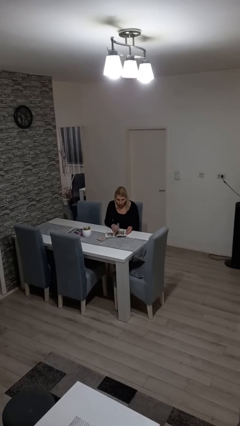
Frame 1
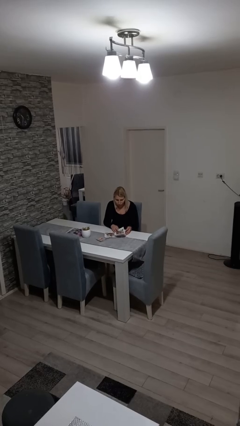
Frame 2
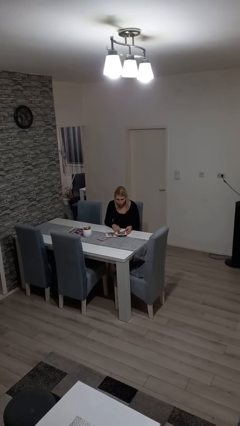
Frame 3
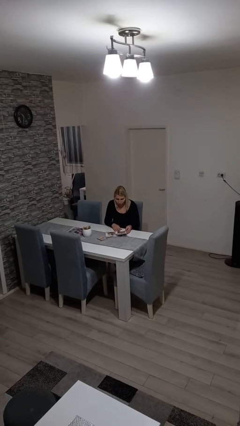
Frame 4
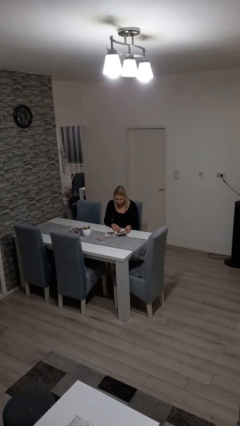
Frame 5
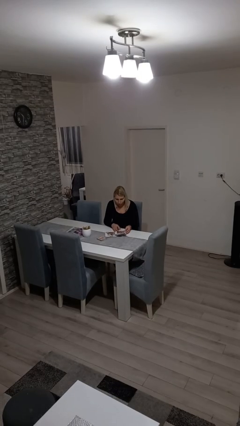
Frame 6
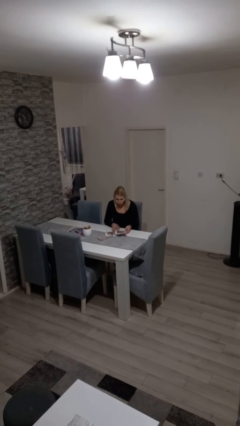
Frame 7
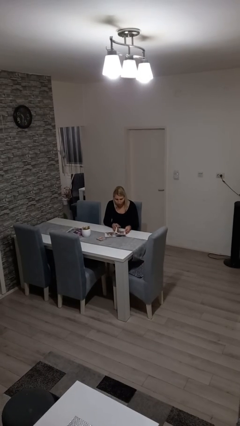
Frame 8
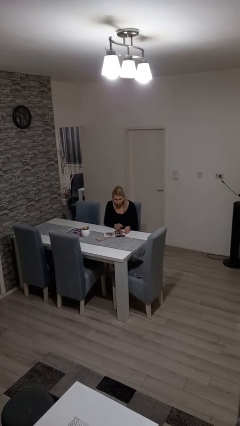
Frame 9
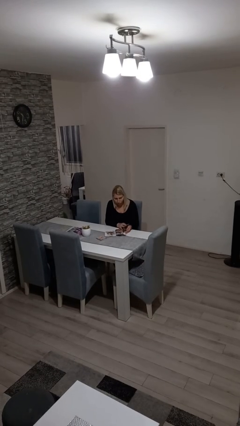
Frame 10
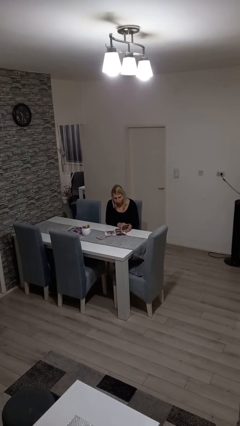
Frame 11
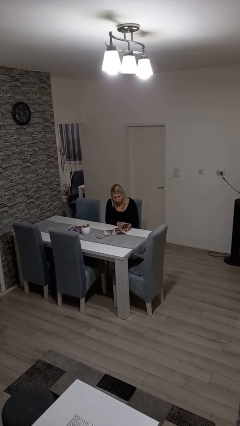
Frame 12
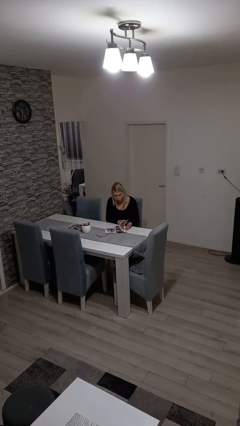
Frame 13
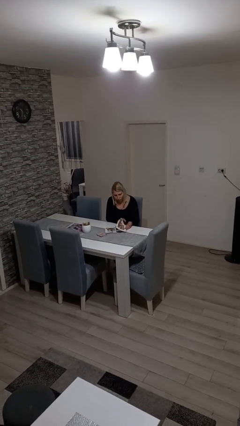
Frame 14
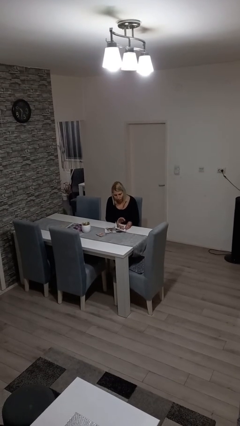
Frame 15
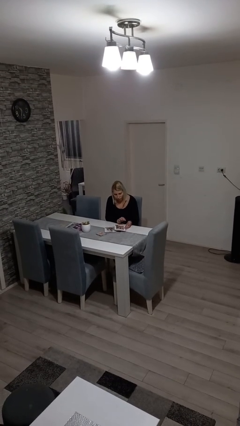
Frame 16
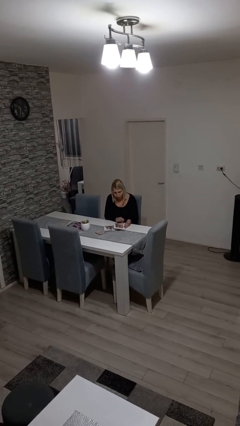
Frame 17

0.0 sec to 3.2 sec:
person reads magazine

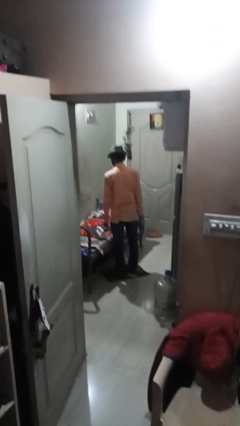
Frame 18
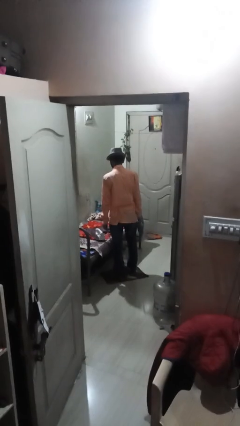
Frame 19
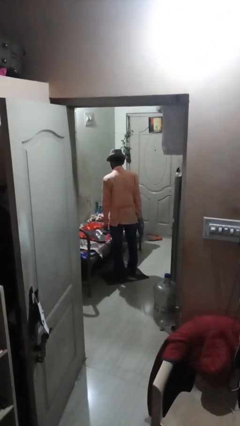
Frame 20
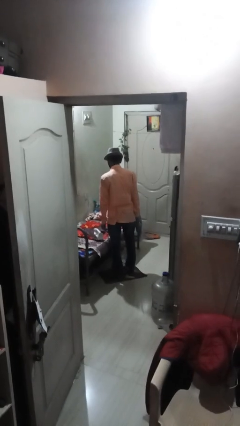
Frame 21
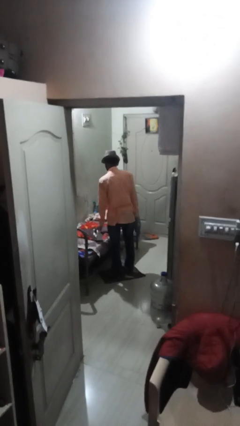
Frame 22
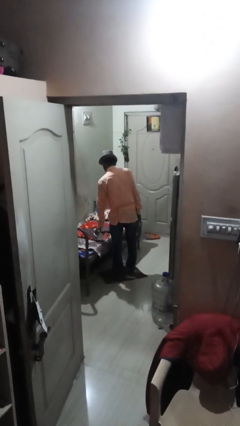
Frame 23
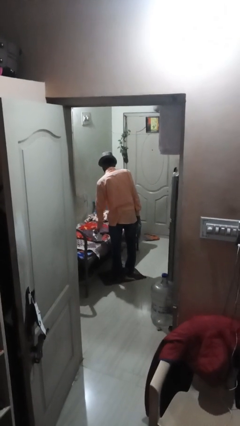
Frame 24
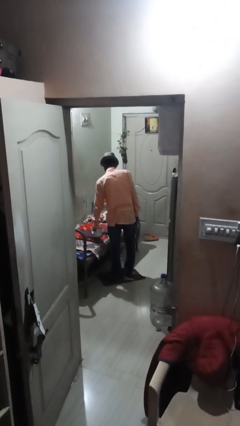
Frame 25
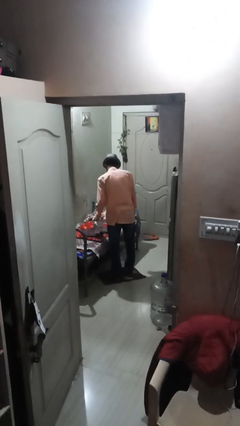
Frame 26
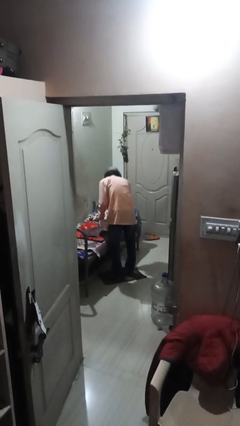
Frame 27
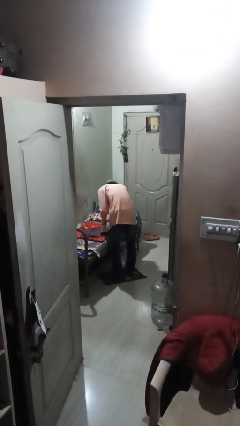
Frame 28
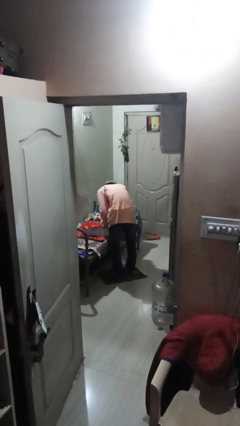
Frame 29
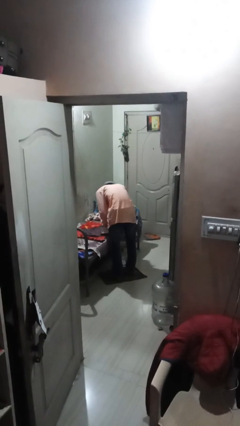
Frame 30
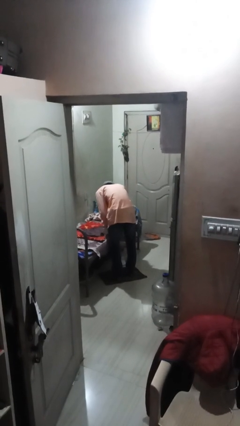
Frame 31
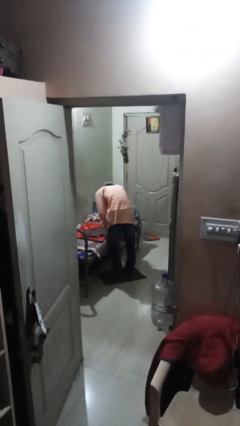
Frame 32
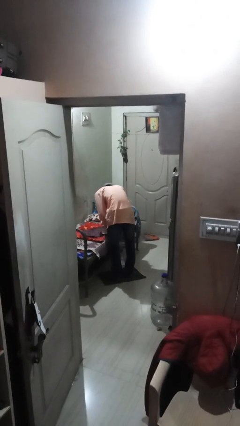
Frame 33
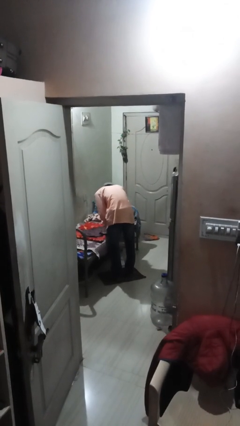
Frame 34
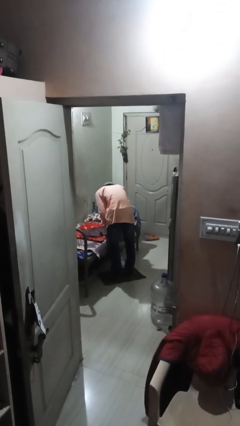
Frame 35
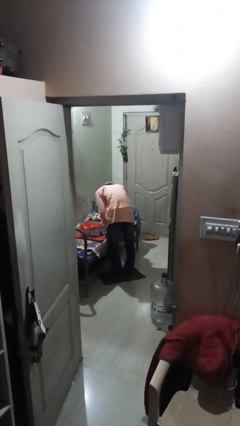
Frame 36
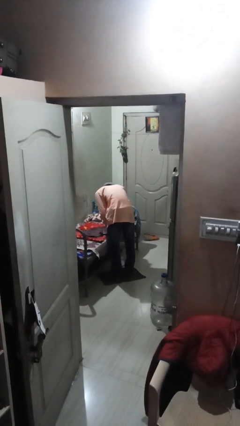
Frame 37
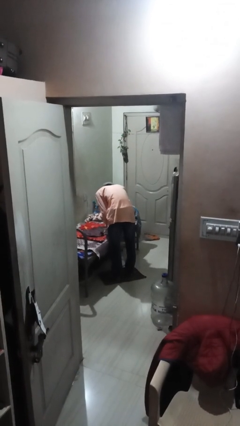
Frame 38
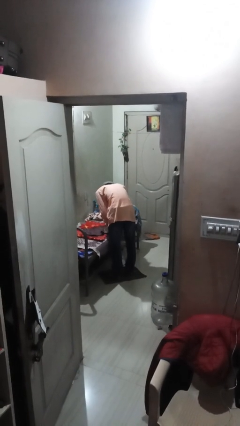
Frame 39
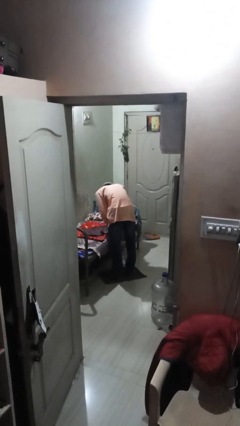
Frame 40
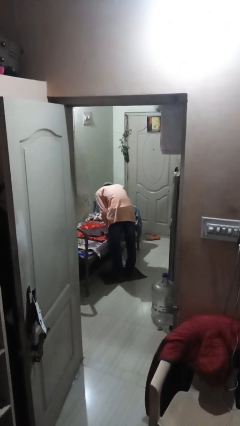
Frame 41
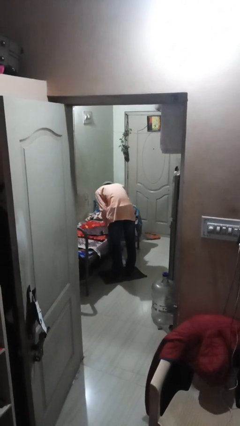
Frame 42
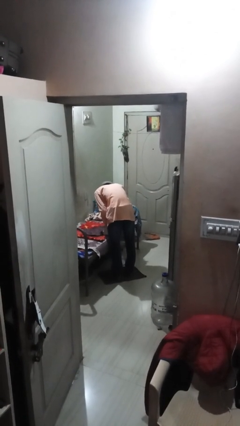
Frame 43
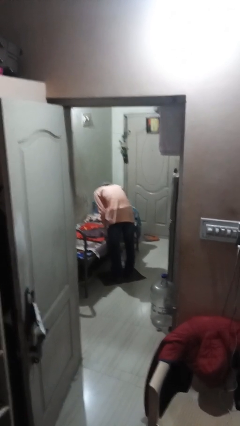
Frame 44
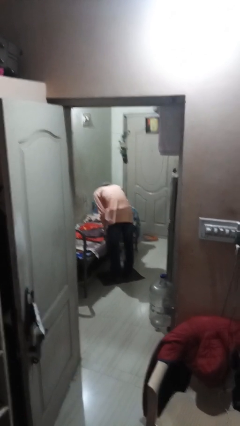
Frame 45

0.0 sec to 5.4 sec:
person irons clothes

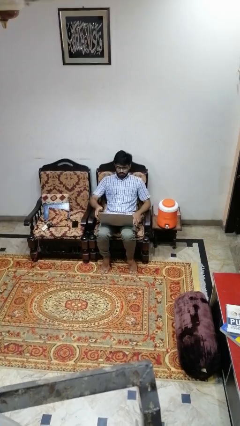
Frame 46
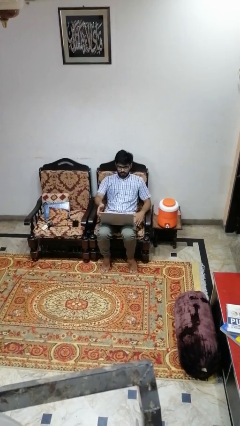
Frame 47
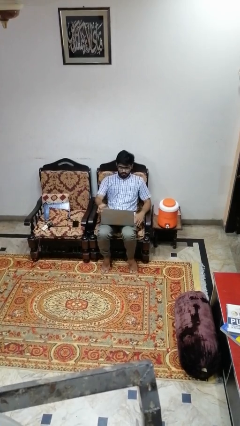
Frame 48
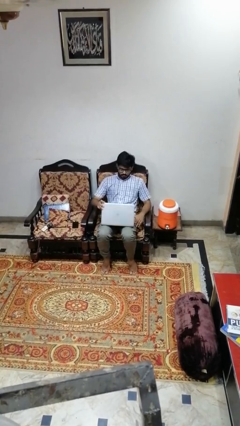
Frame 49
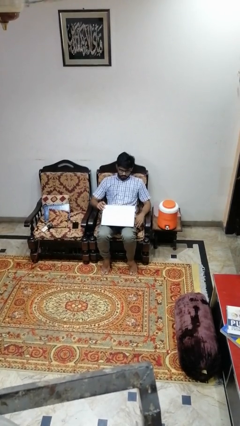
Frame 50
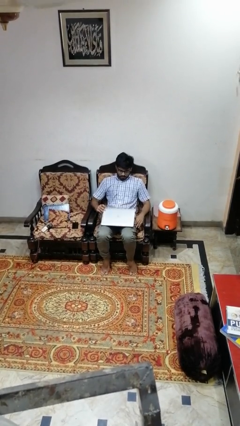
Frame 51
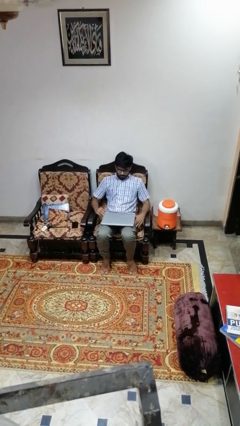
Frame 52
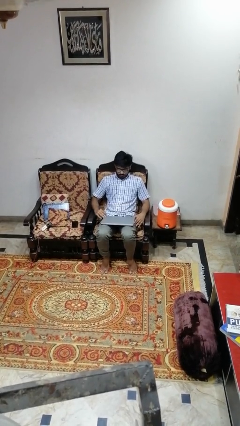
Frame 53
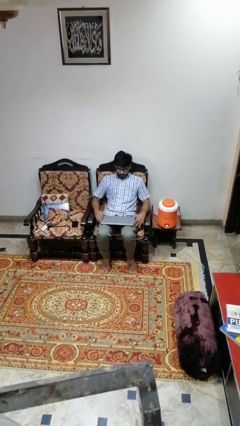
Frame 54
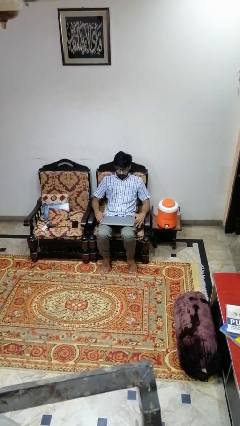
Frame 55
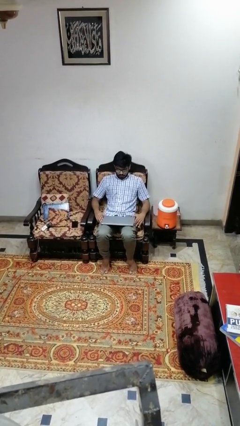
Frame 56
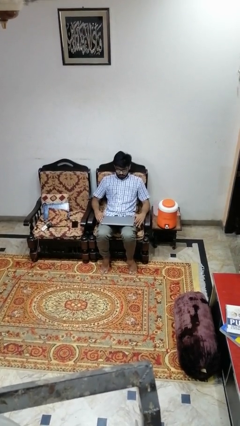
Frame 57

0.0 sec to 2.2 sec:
person closes laptop

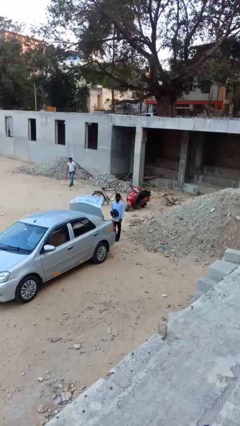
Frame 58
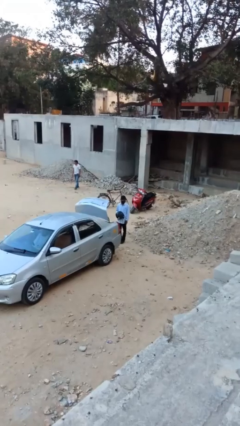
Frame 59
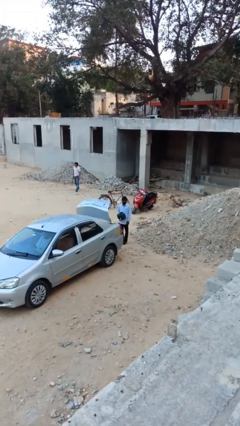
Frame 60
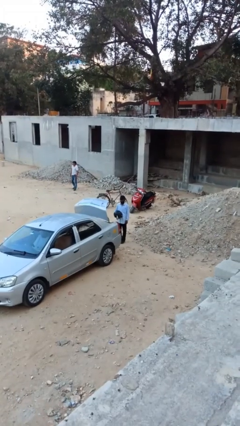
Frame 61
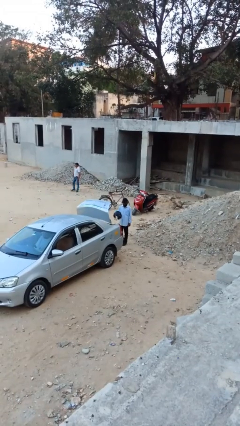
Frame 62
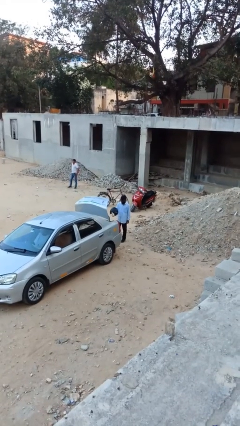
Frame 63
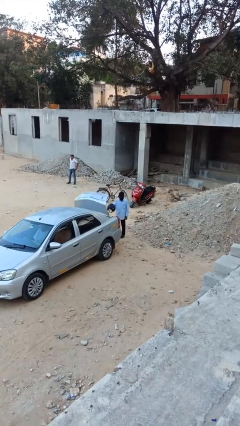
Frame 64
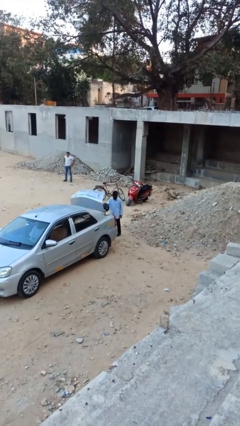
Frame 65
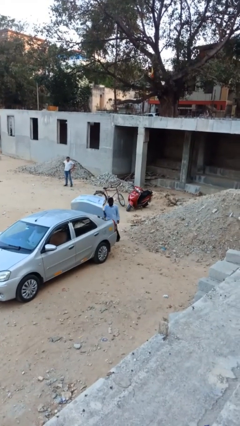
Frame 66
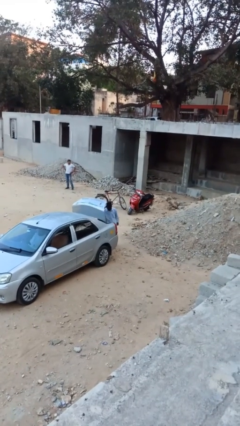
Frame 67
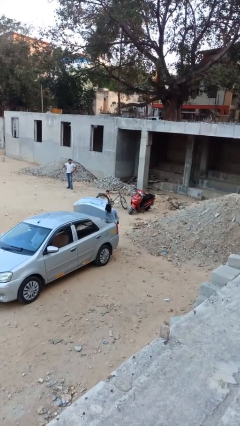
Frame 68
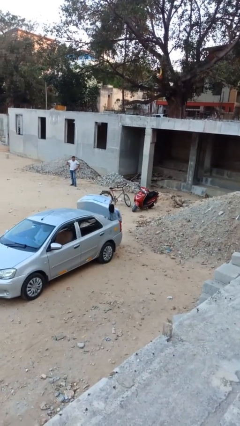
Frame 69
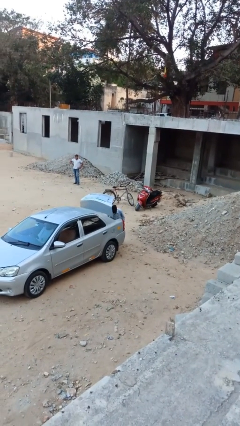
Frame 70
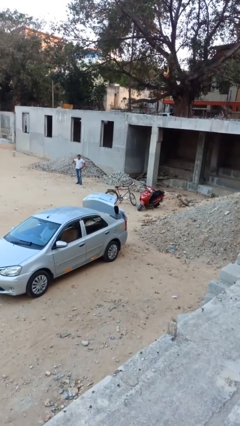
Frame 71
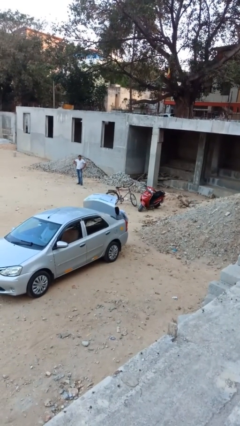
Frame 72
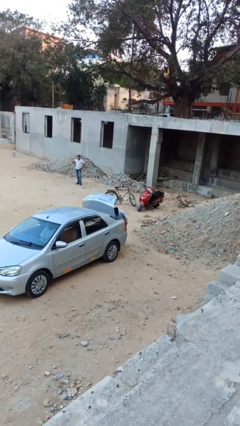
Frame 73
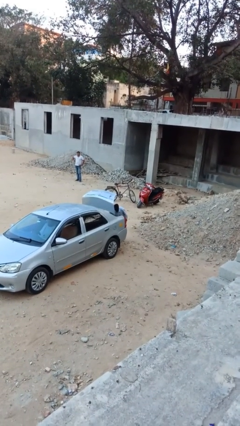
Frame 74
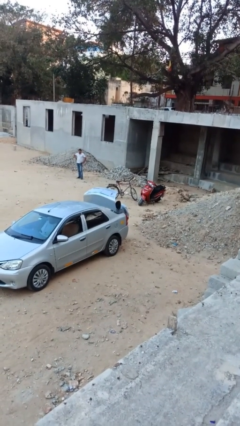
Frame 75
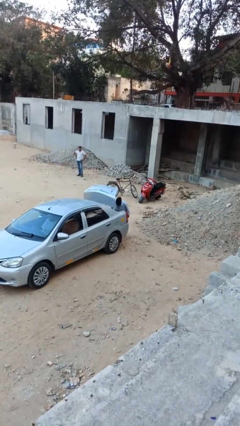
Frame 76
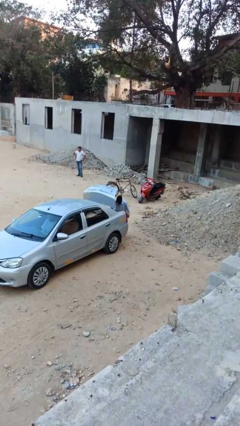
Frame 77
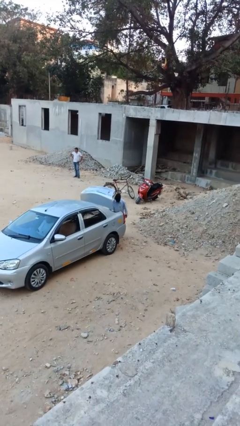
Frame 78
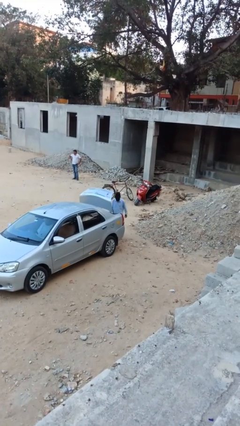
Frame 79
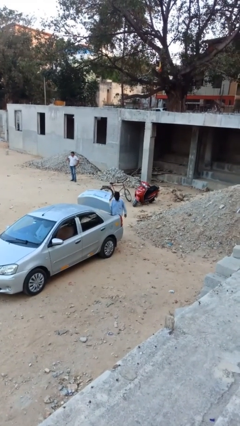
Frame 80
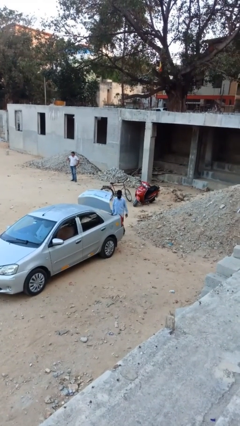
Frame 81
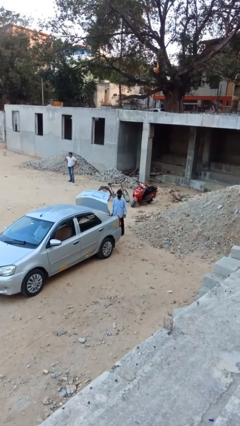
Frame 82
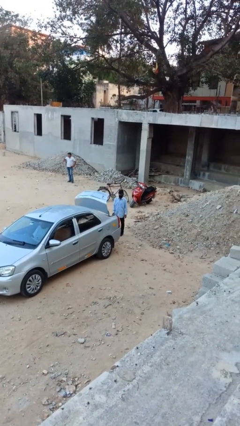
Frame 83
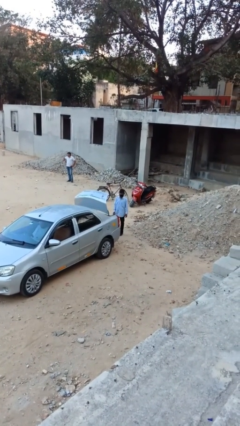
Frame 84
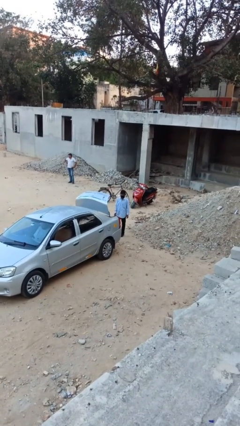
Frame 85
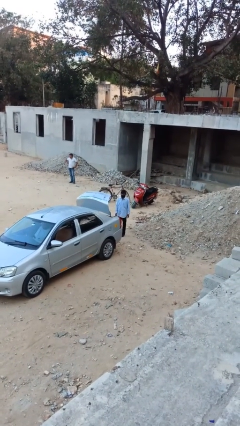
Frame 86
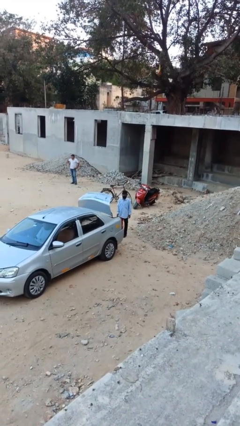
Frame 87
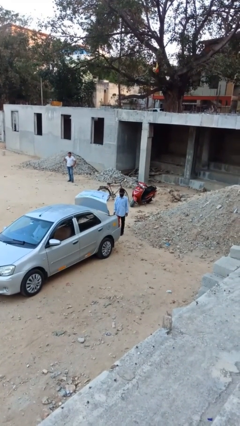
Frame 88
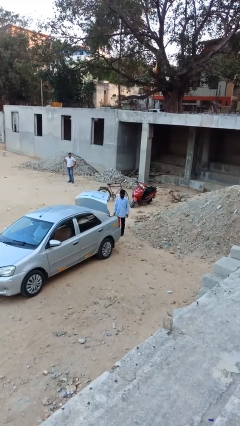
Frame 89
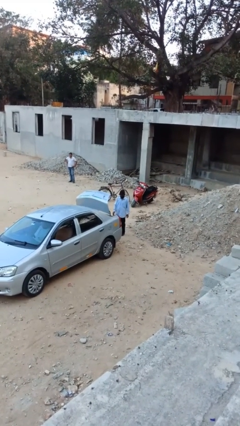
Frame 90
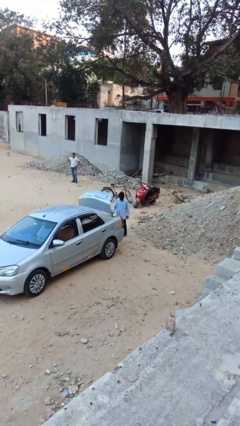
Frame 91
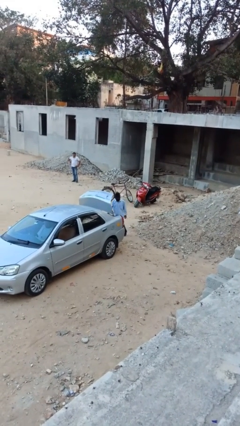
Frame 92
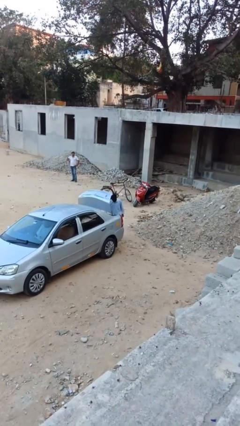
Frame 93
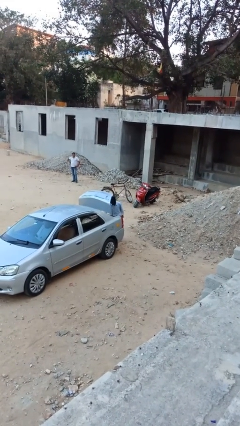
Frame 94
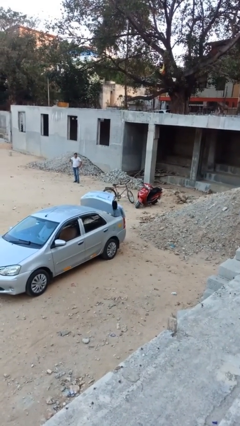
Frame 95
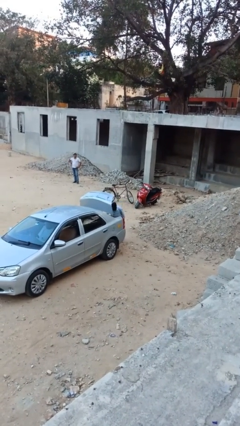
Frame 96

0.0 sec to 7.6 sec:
person loads car
